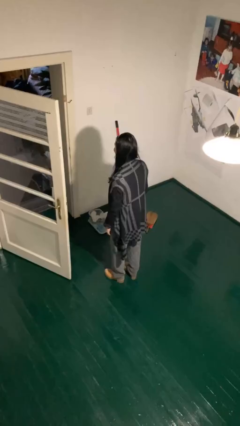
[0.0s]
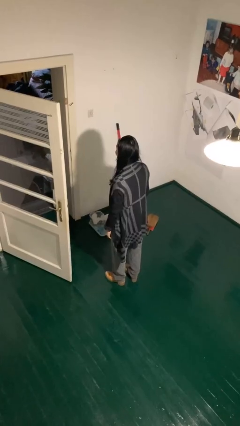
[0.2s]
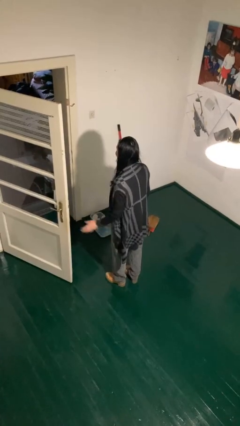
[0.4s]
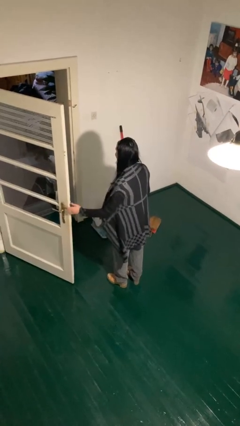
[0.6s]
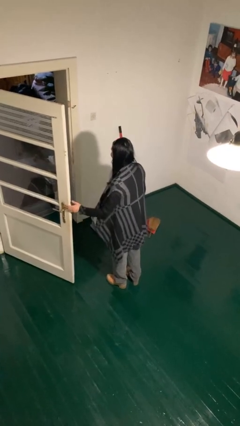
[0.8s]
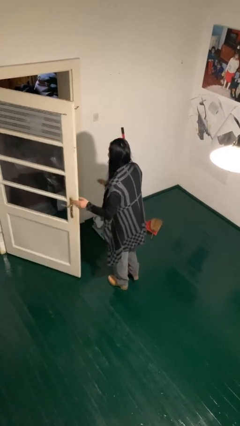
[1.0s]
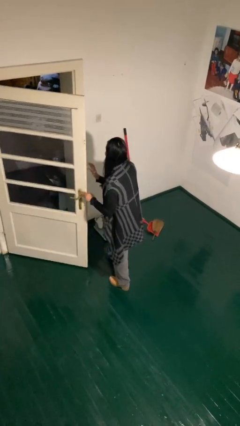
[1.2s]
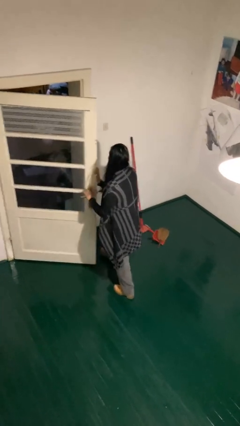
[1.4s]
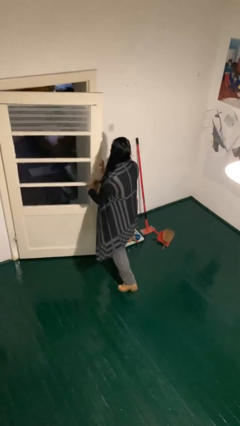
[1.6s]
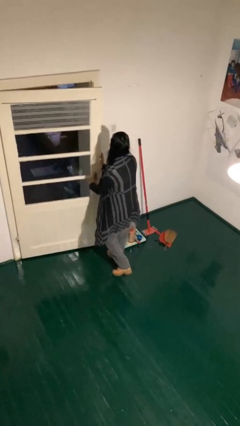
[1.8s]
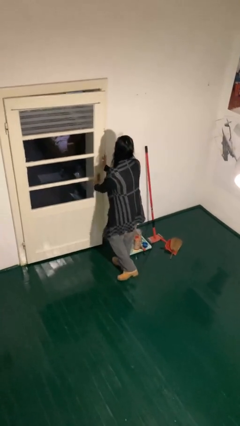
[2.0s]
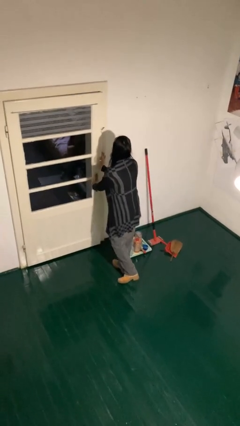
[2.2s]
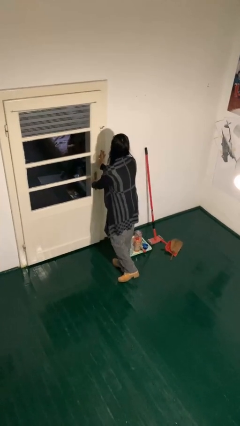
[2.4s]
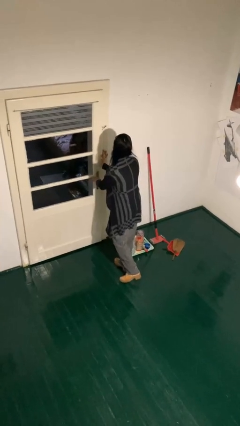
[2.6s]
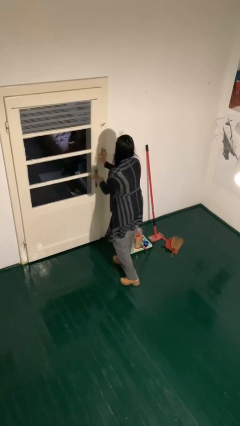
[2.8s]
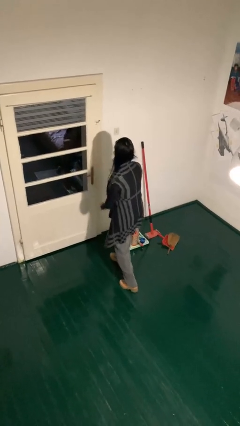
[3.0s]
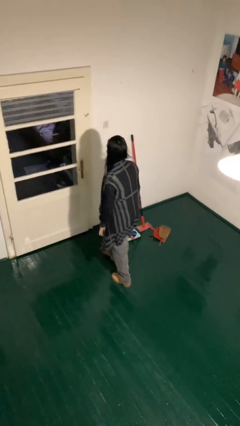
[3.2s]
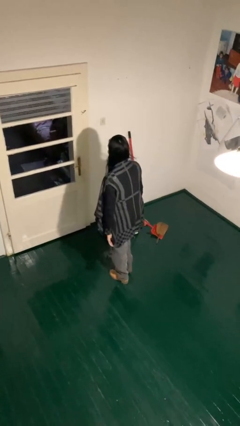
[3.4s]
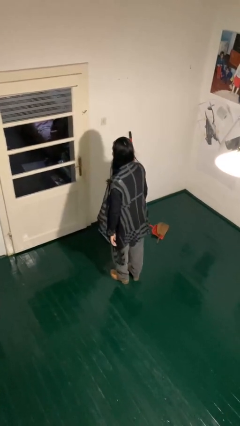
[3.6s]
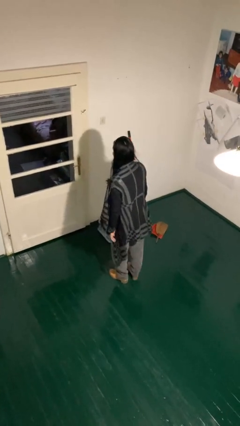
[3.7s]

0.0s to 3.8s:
person closes facility door

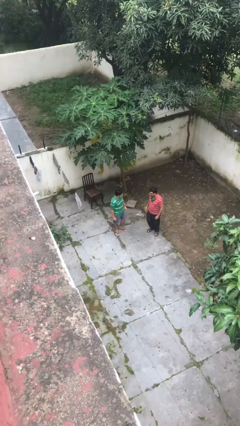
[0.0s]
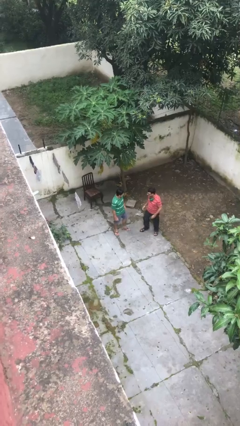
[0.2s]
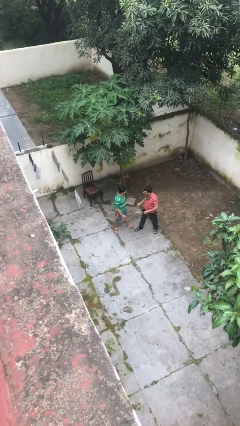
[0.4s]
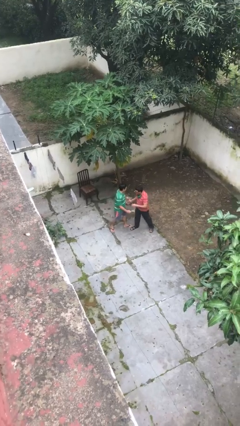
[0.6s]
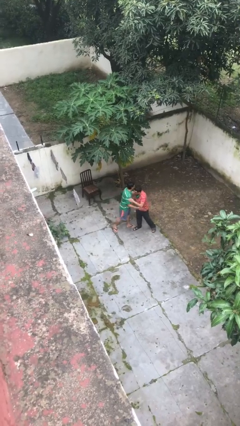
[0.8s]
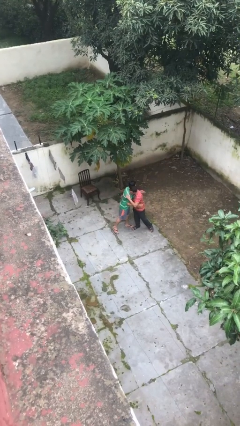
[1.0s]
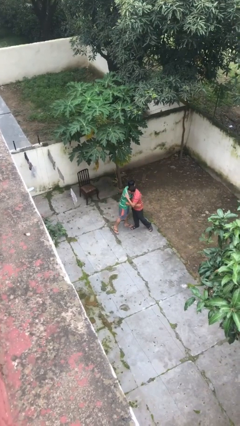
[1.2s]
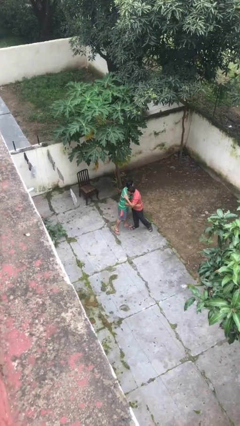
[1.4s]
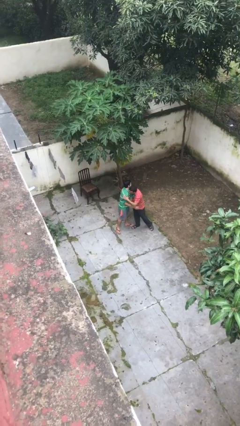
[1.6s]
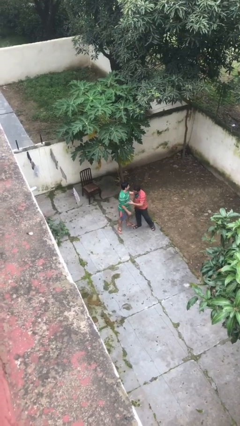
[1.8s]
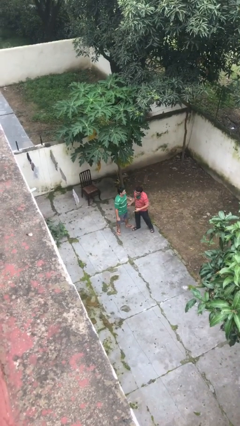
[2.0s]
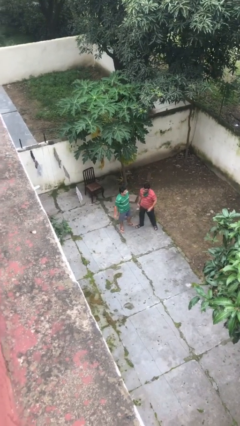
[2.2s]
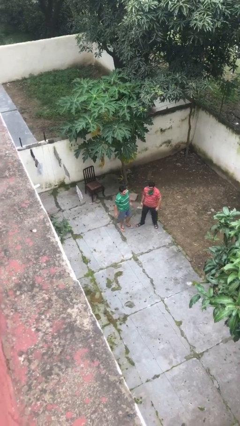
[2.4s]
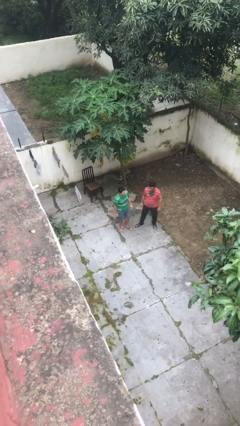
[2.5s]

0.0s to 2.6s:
person embraces person

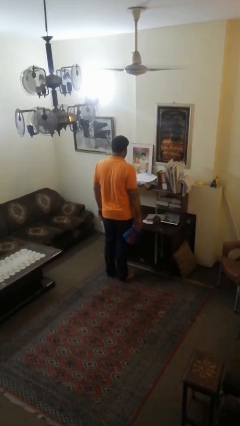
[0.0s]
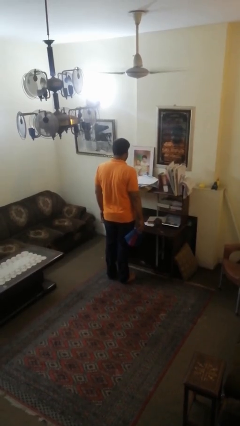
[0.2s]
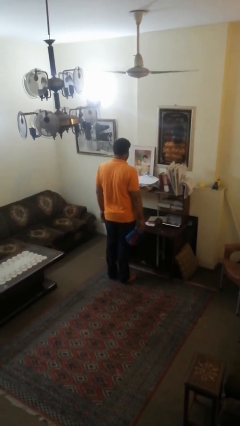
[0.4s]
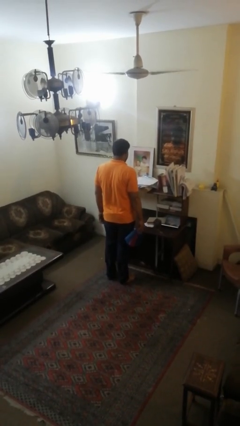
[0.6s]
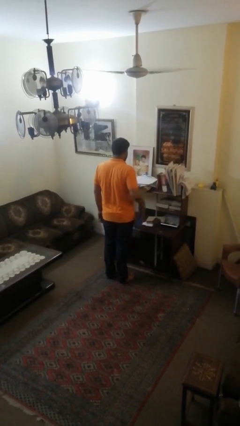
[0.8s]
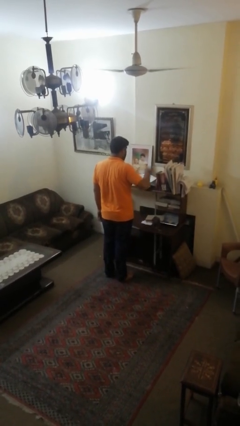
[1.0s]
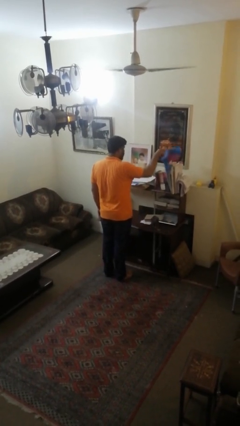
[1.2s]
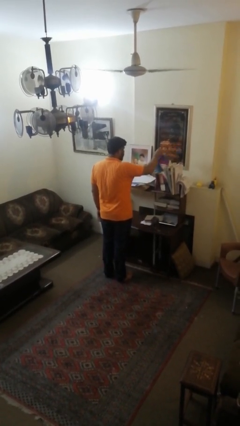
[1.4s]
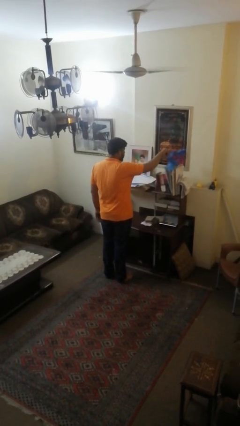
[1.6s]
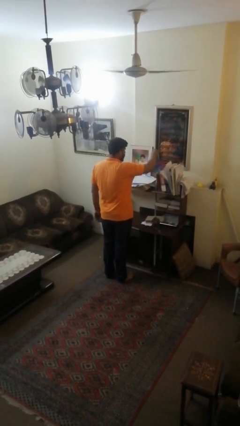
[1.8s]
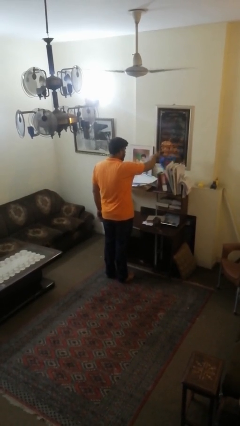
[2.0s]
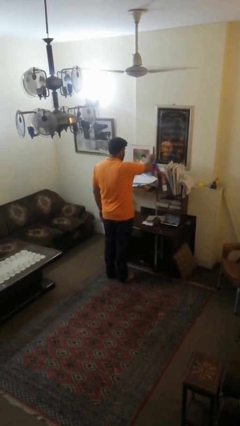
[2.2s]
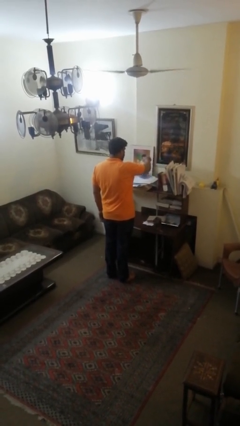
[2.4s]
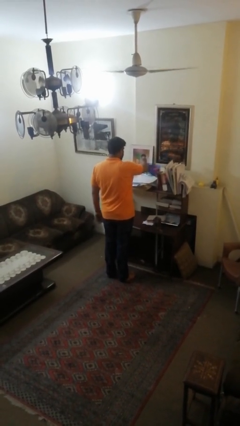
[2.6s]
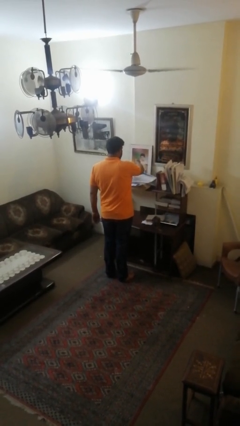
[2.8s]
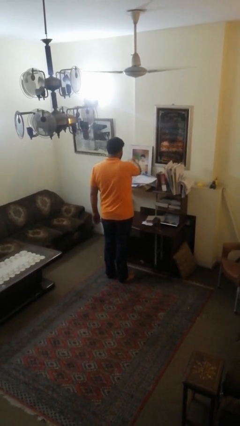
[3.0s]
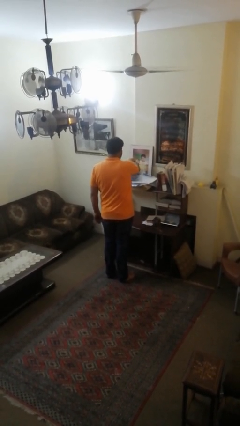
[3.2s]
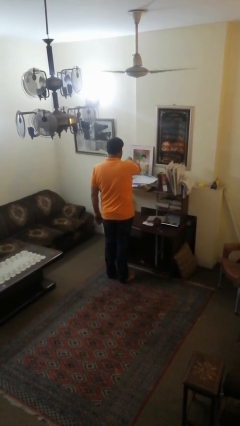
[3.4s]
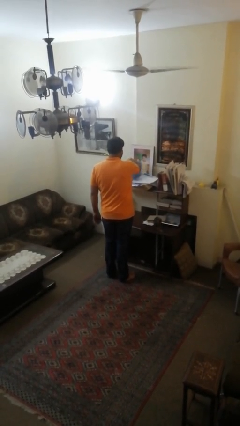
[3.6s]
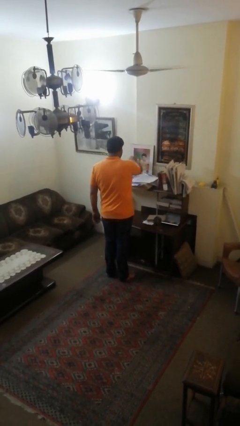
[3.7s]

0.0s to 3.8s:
person dusts furniture

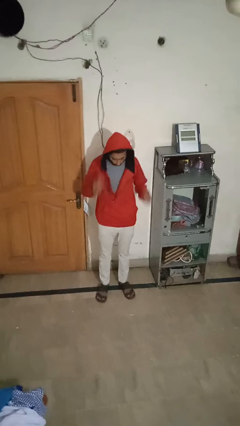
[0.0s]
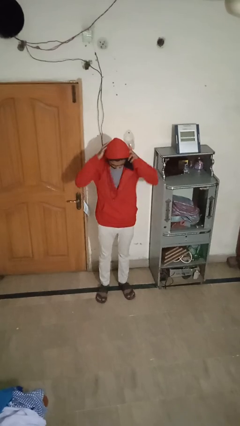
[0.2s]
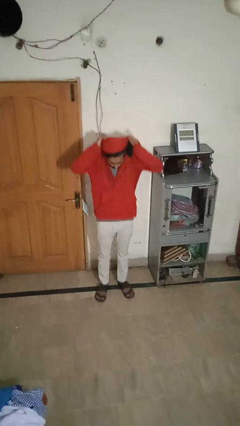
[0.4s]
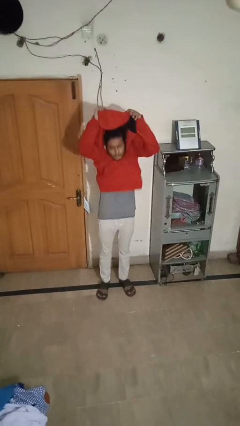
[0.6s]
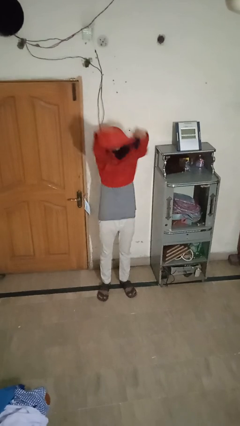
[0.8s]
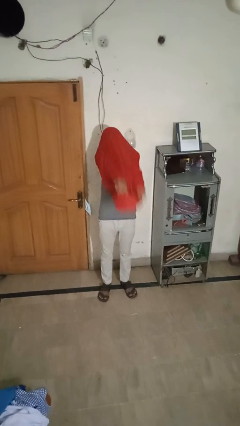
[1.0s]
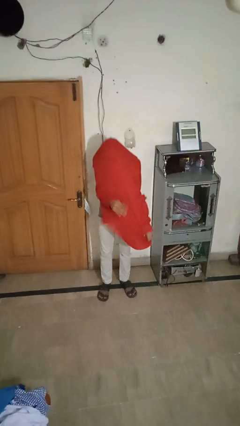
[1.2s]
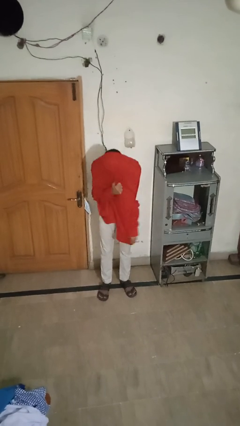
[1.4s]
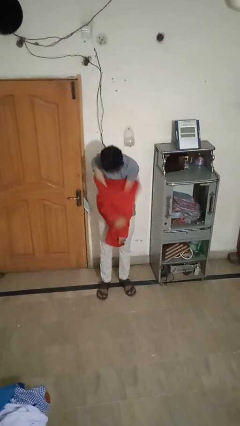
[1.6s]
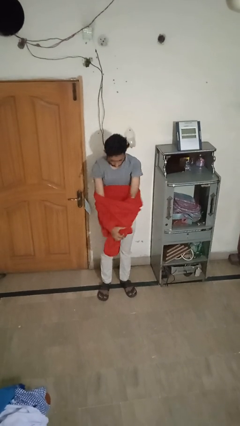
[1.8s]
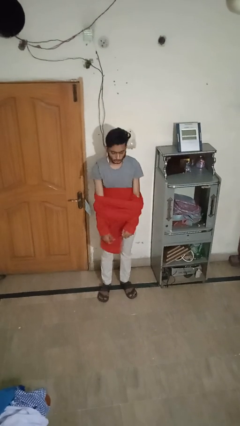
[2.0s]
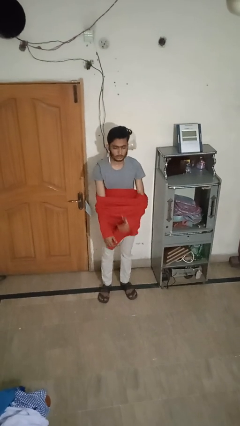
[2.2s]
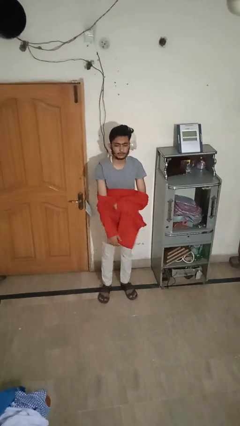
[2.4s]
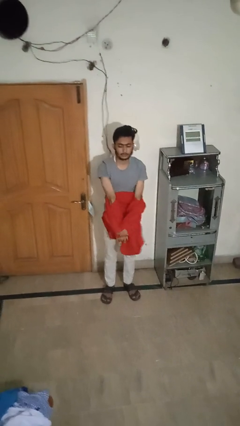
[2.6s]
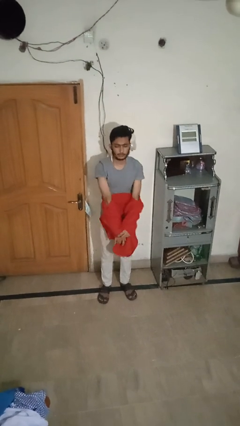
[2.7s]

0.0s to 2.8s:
person takes off hoodie

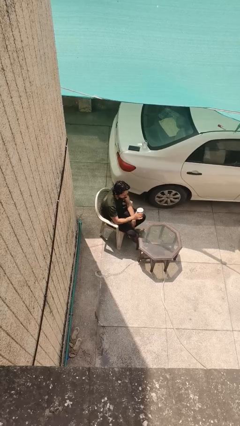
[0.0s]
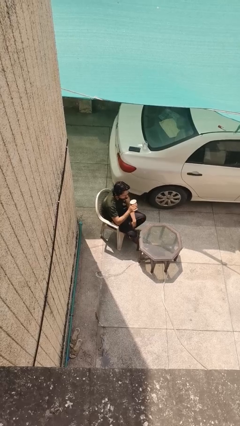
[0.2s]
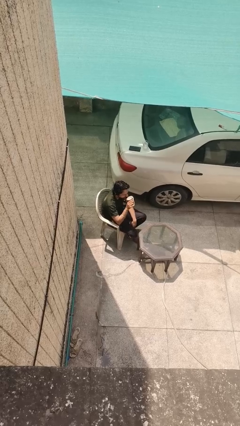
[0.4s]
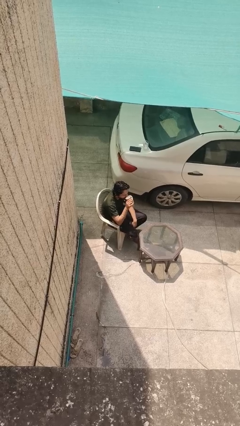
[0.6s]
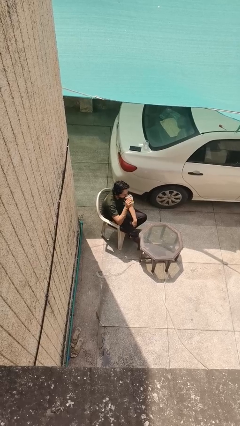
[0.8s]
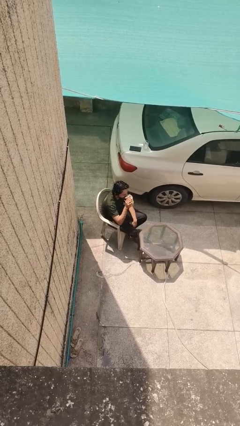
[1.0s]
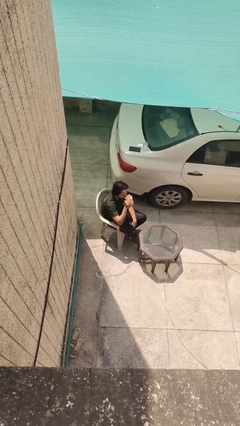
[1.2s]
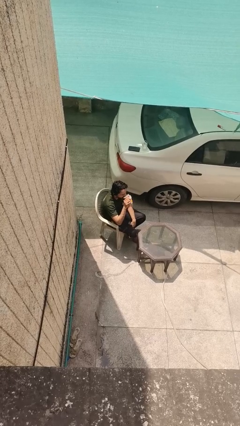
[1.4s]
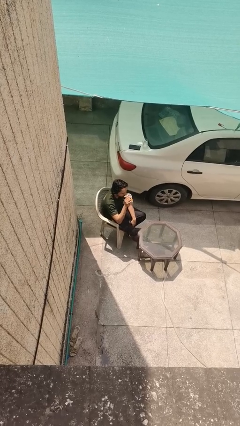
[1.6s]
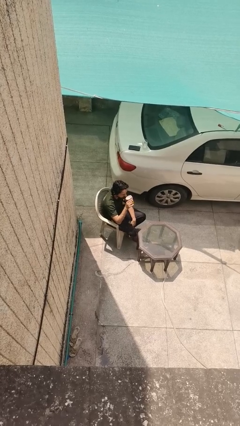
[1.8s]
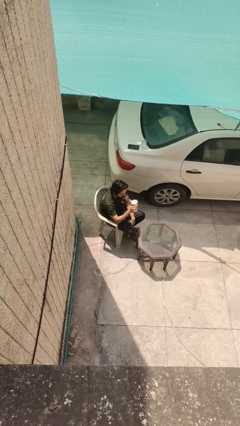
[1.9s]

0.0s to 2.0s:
person drinks from mug

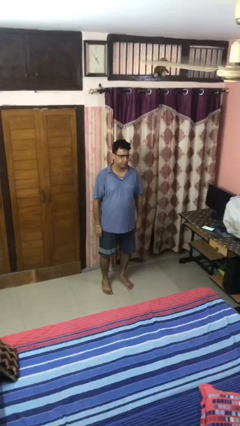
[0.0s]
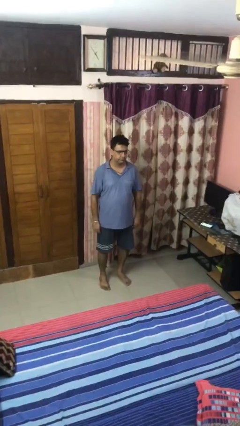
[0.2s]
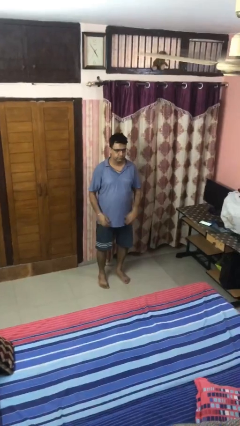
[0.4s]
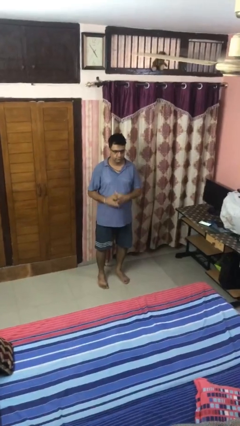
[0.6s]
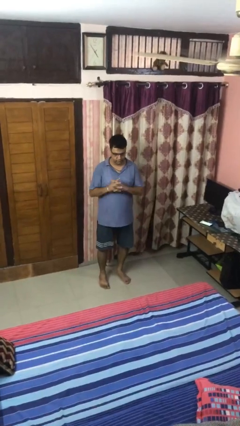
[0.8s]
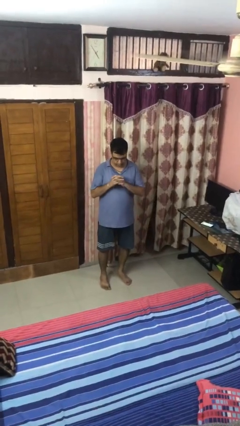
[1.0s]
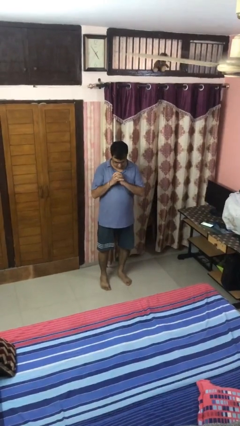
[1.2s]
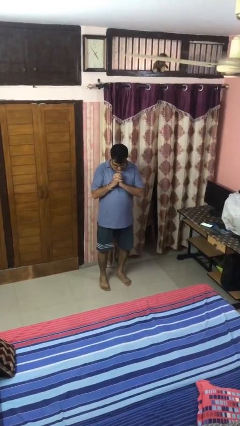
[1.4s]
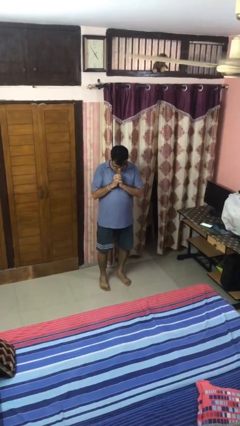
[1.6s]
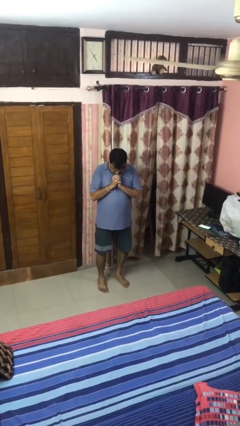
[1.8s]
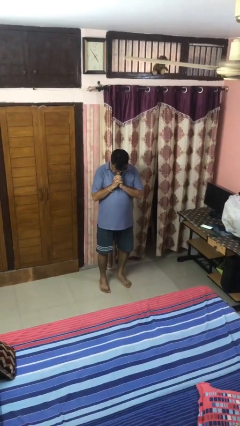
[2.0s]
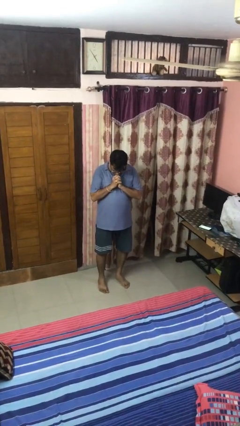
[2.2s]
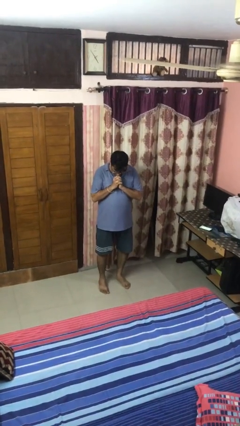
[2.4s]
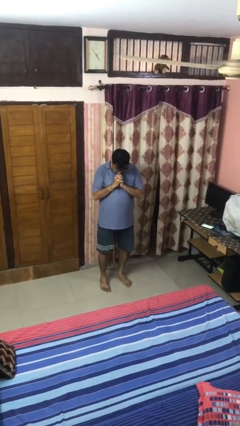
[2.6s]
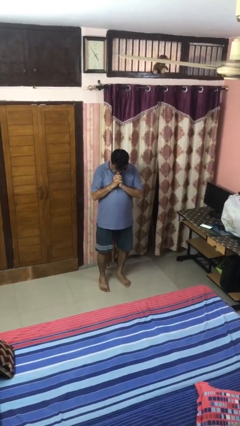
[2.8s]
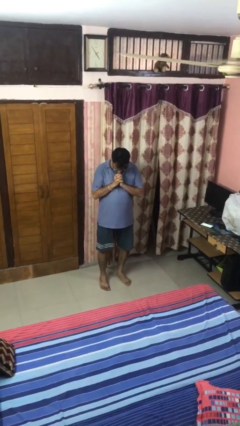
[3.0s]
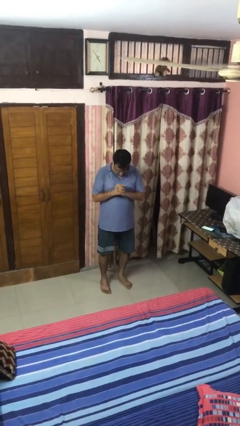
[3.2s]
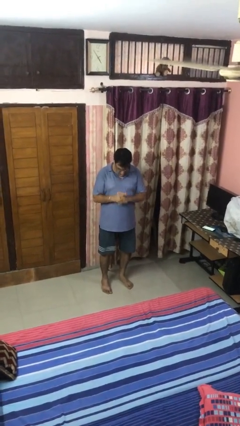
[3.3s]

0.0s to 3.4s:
person prays
